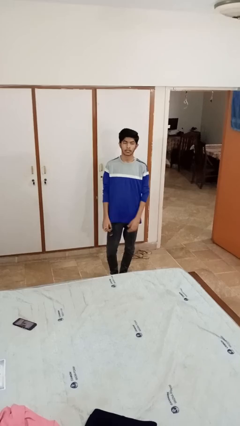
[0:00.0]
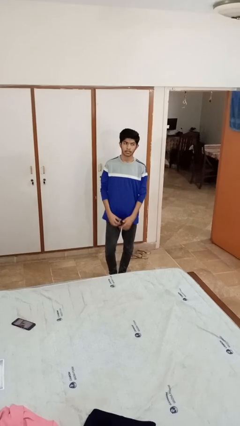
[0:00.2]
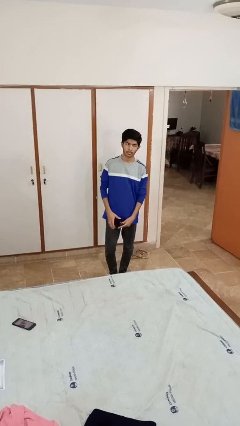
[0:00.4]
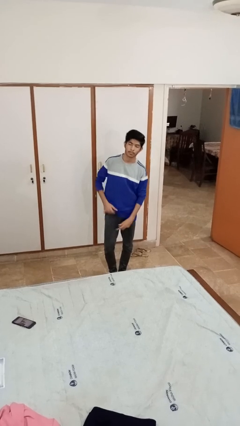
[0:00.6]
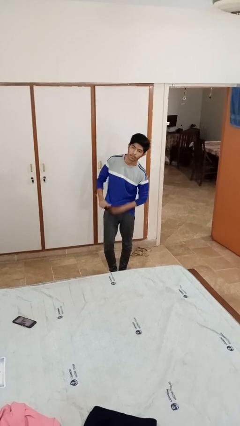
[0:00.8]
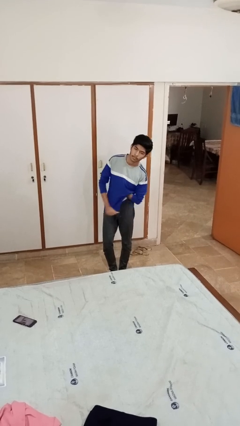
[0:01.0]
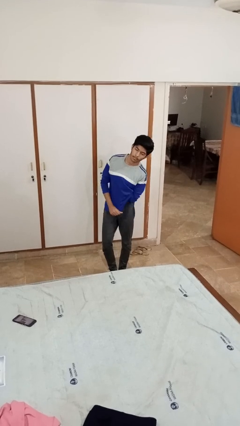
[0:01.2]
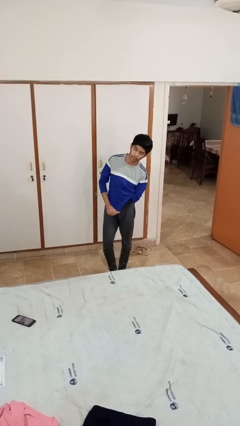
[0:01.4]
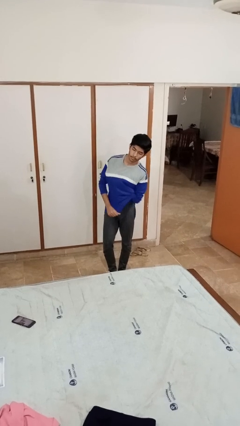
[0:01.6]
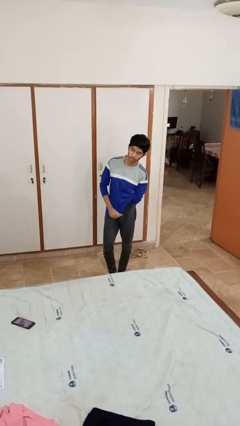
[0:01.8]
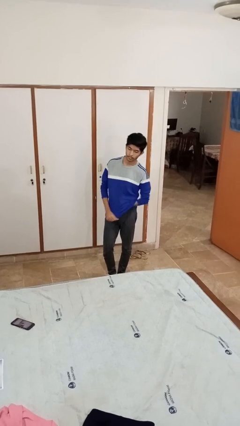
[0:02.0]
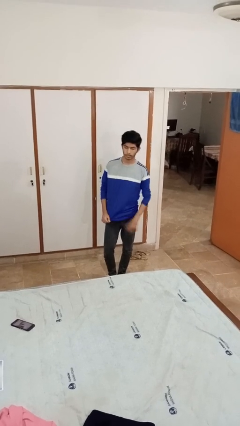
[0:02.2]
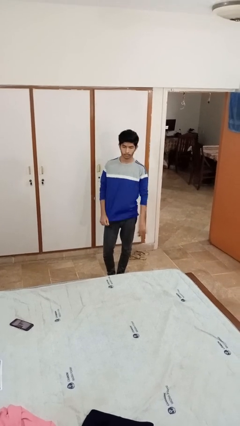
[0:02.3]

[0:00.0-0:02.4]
person applies deodorant

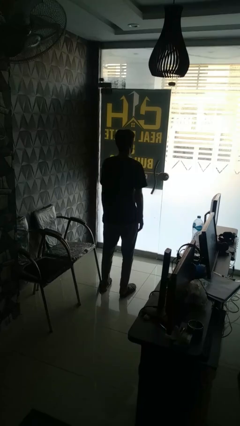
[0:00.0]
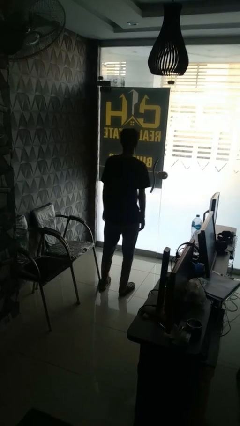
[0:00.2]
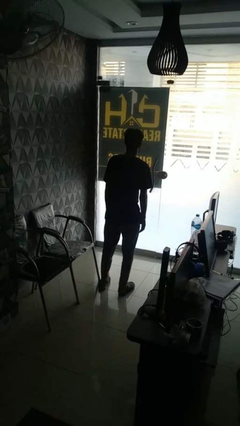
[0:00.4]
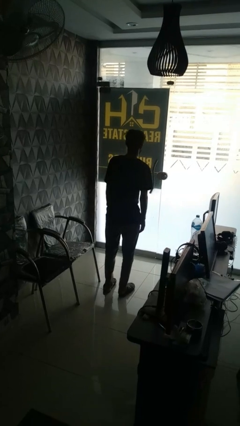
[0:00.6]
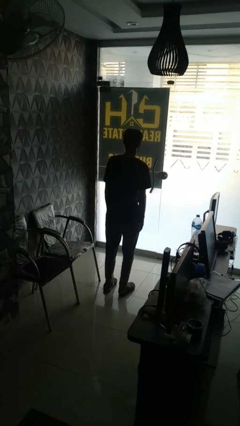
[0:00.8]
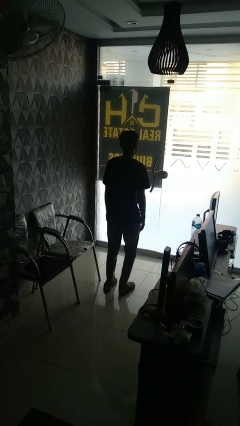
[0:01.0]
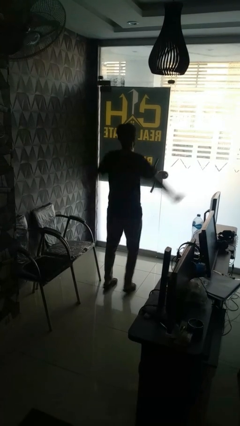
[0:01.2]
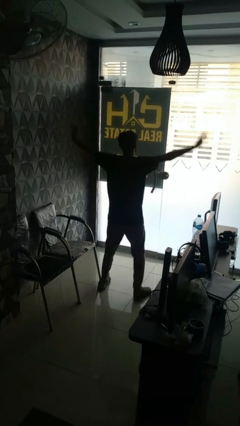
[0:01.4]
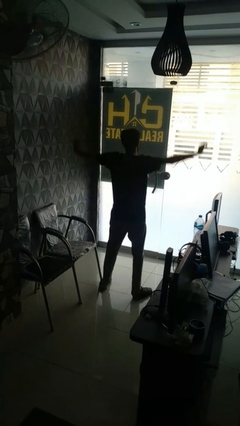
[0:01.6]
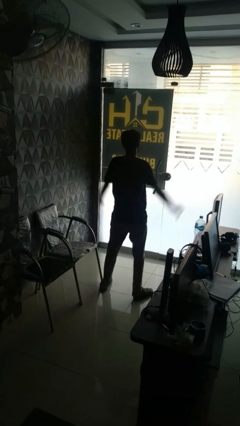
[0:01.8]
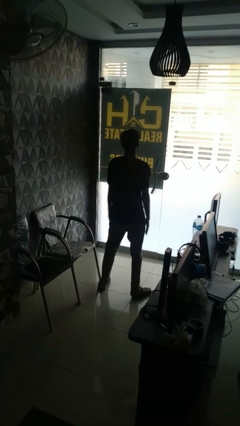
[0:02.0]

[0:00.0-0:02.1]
person exercises with jumping jacks

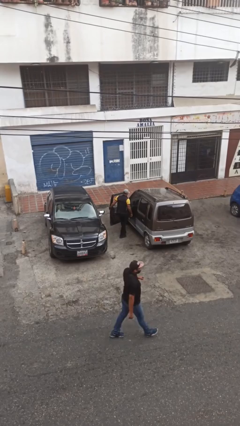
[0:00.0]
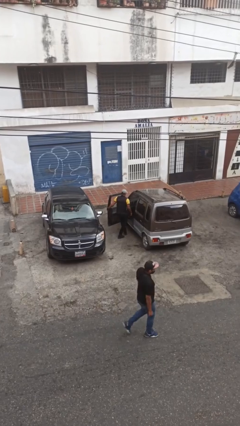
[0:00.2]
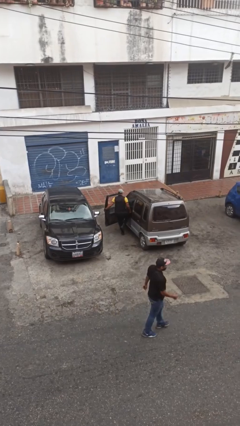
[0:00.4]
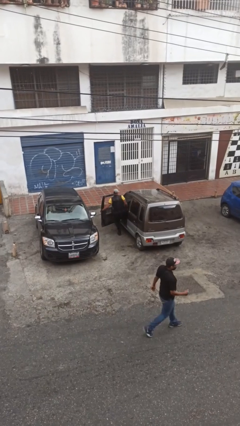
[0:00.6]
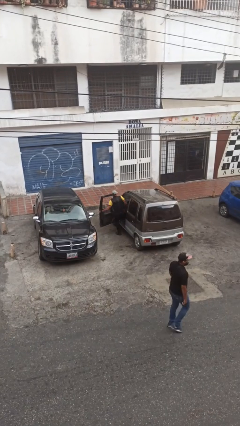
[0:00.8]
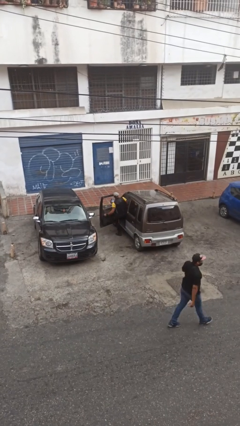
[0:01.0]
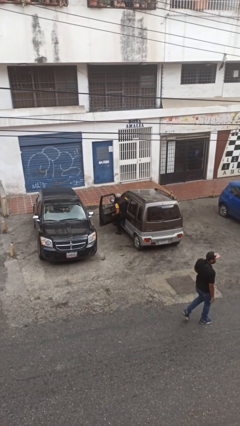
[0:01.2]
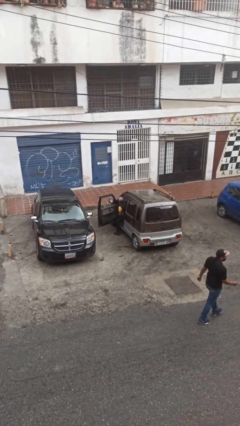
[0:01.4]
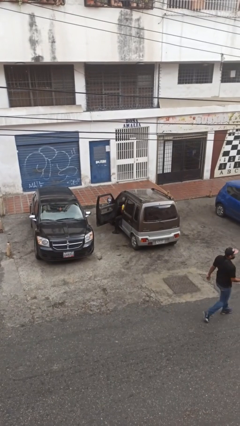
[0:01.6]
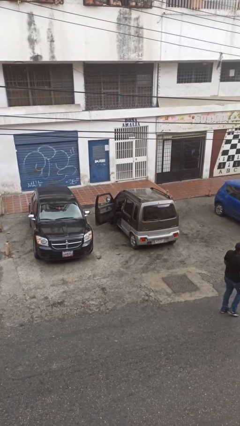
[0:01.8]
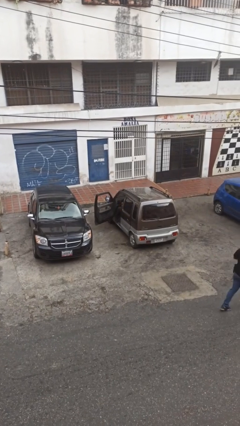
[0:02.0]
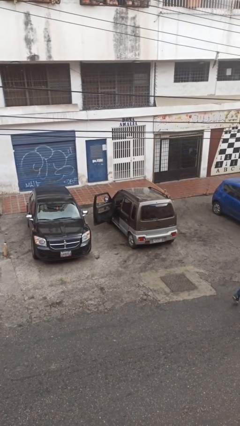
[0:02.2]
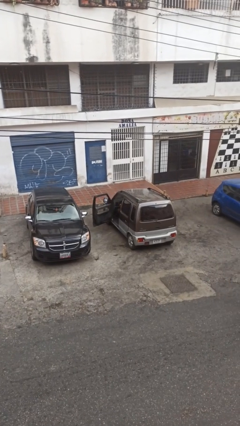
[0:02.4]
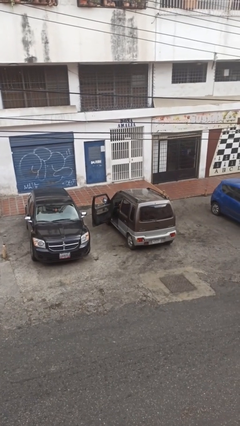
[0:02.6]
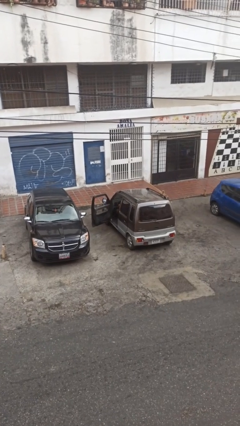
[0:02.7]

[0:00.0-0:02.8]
person enters car

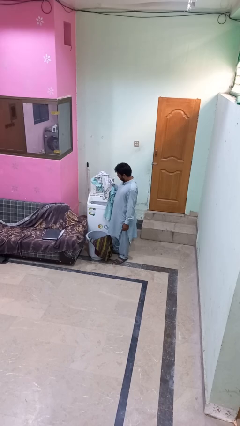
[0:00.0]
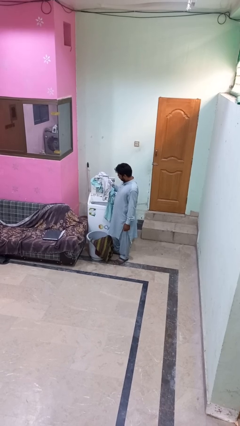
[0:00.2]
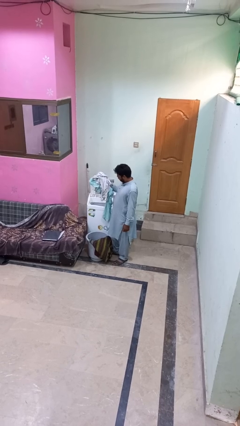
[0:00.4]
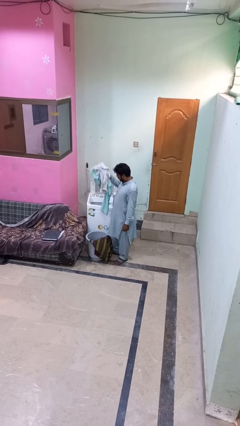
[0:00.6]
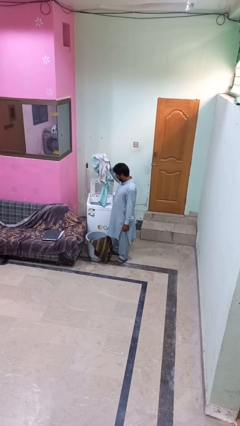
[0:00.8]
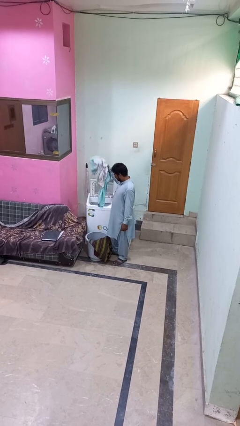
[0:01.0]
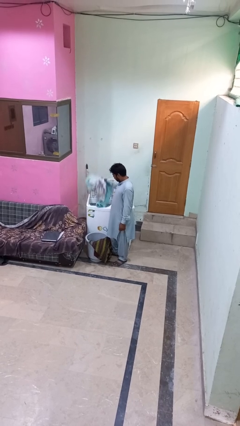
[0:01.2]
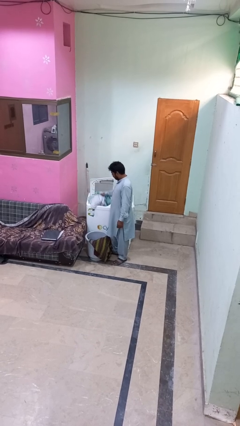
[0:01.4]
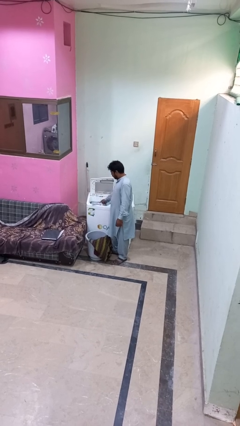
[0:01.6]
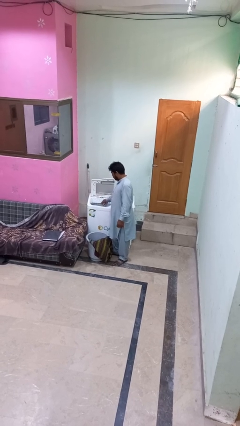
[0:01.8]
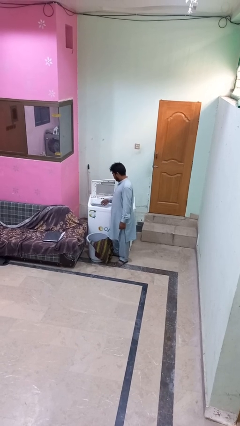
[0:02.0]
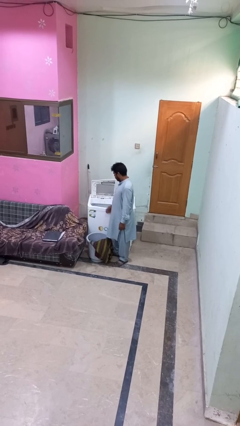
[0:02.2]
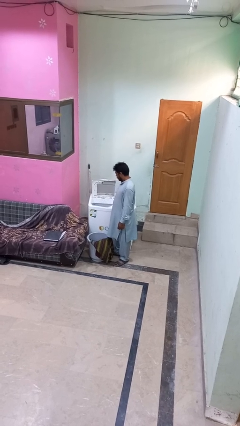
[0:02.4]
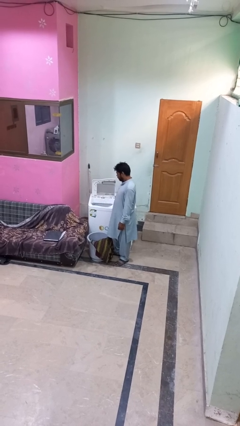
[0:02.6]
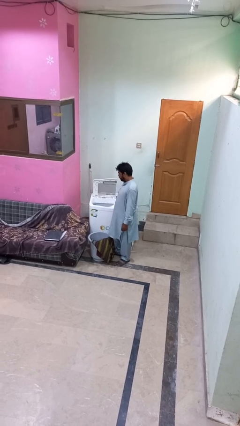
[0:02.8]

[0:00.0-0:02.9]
person loads clotheswasher

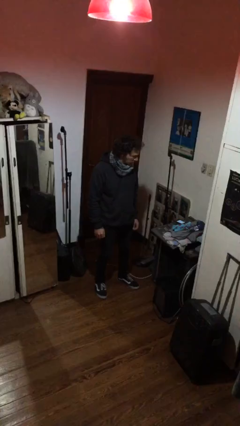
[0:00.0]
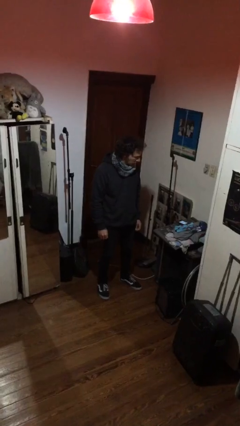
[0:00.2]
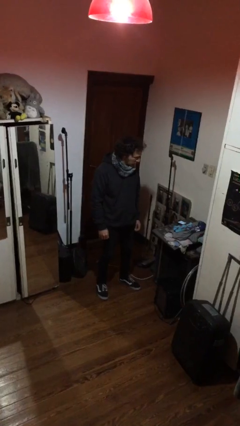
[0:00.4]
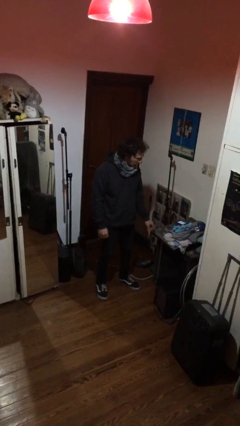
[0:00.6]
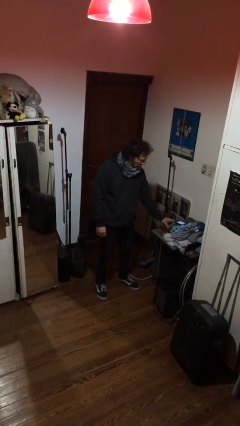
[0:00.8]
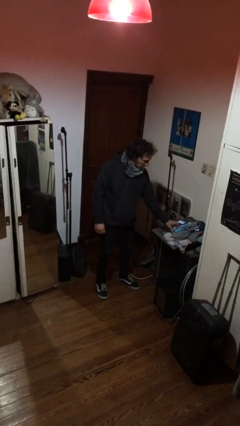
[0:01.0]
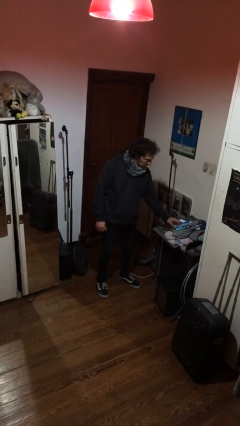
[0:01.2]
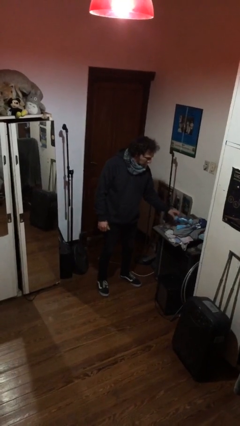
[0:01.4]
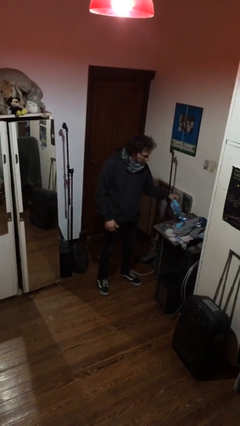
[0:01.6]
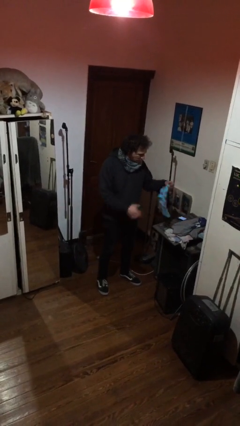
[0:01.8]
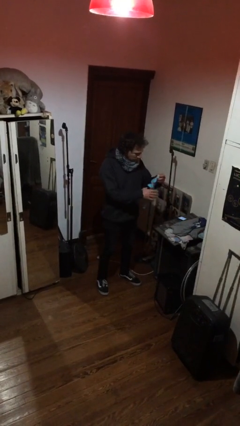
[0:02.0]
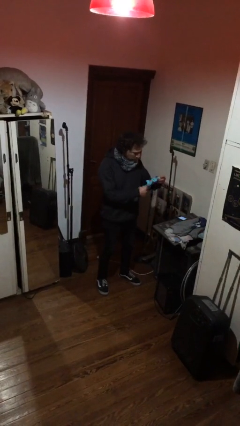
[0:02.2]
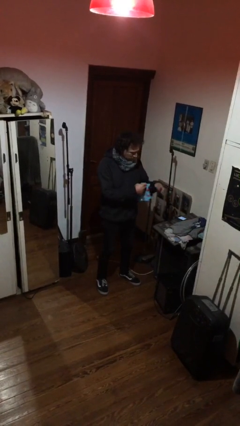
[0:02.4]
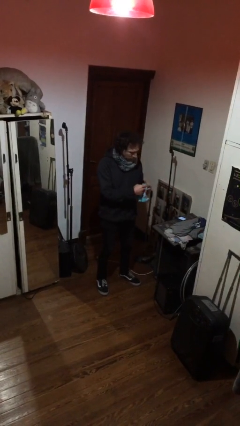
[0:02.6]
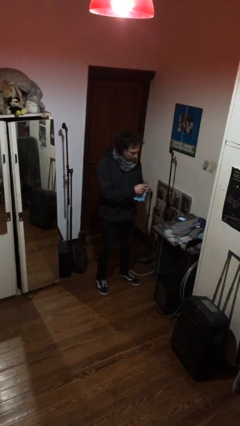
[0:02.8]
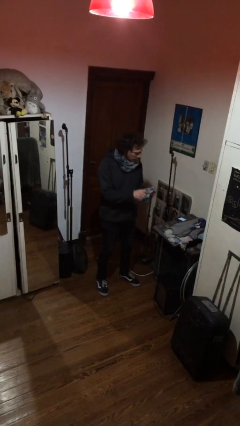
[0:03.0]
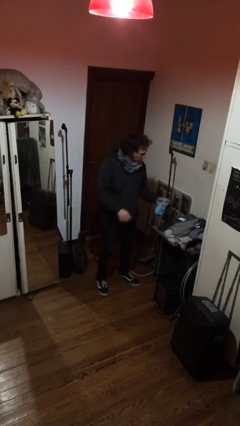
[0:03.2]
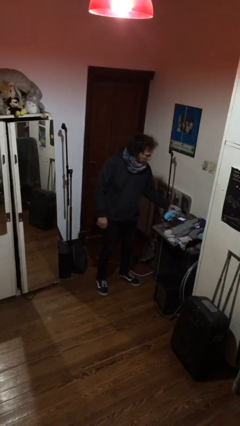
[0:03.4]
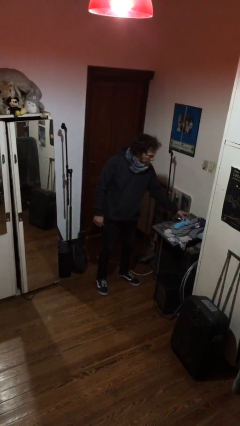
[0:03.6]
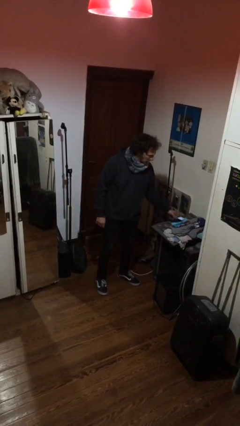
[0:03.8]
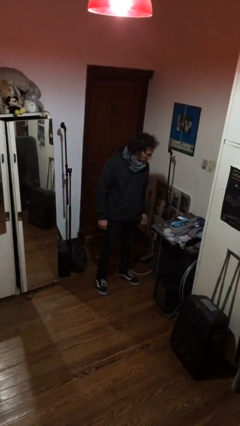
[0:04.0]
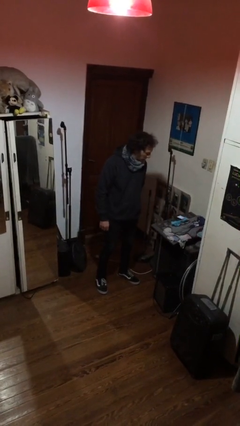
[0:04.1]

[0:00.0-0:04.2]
person folds socks

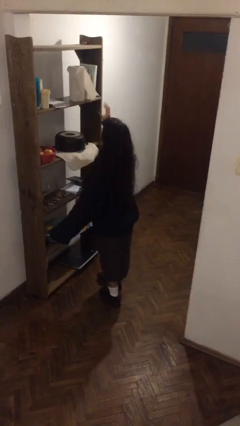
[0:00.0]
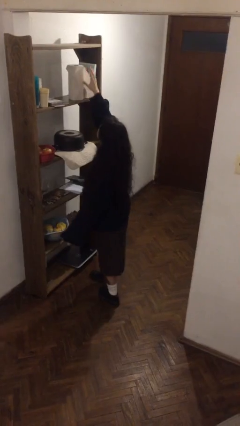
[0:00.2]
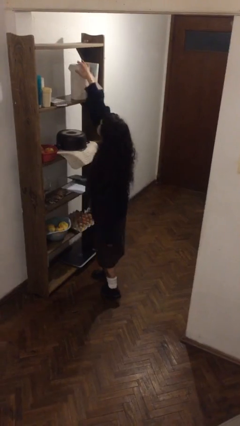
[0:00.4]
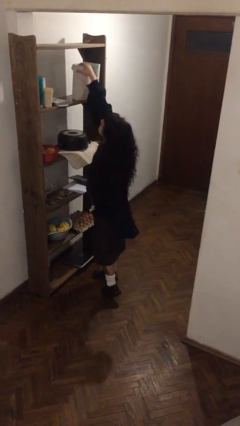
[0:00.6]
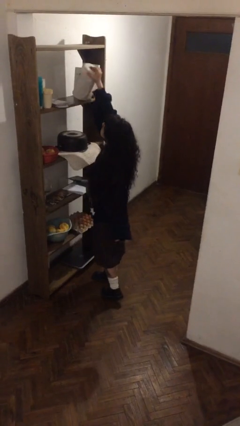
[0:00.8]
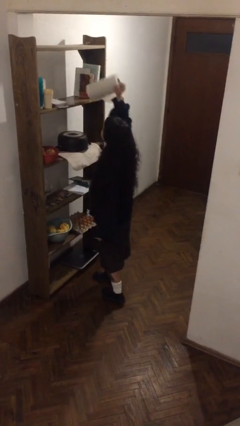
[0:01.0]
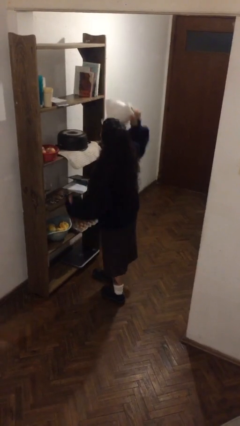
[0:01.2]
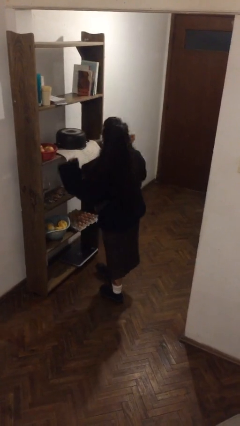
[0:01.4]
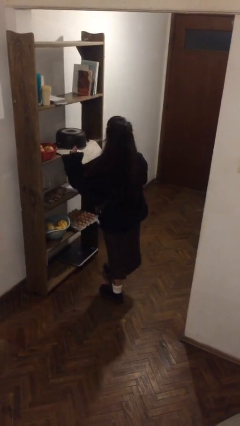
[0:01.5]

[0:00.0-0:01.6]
person picks up object from shelf

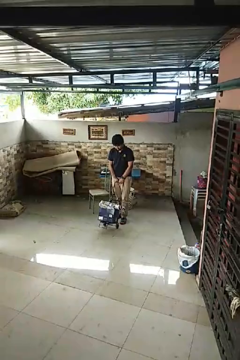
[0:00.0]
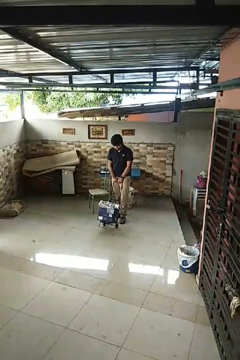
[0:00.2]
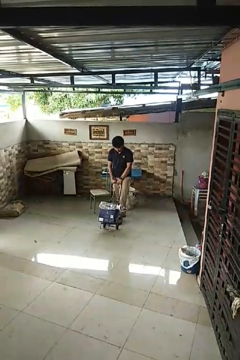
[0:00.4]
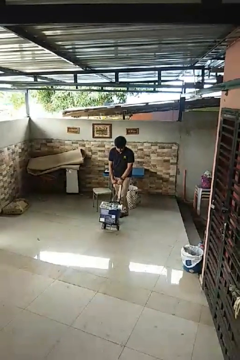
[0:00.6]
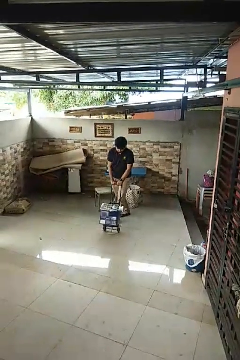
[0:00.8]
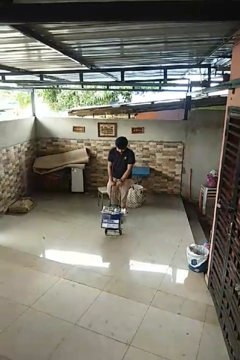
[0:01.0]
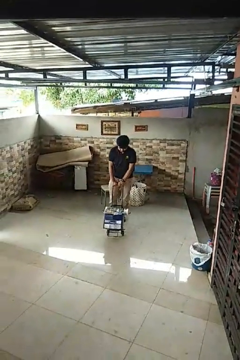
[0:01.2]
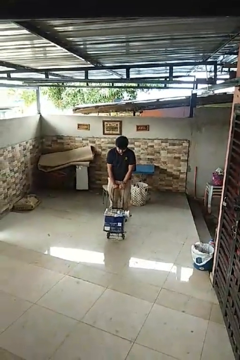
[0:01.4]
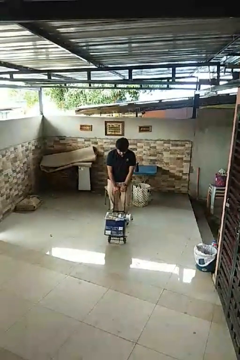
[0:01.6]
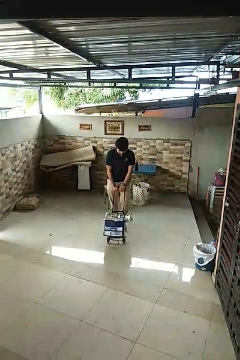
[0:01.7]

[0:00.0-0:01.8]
person pushes wheeled cart
